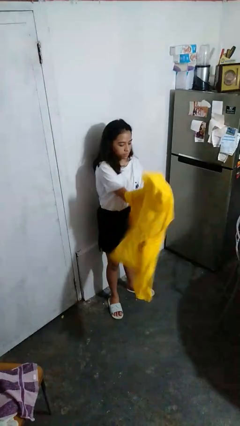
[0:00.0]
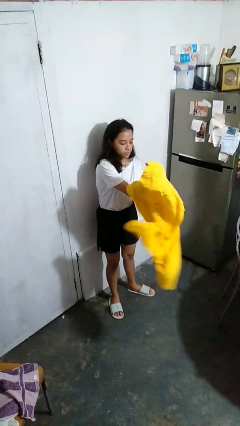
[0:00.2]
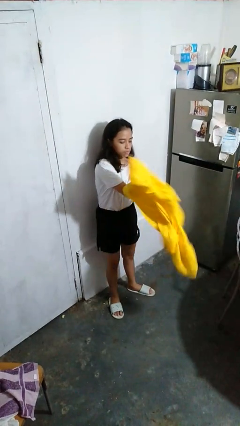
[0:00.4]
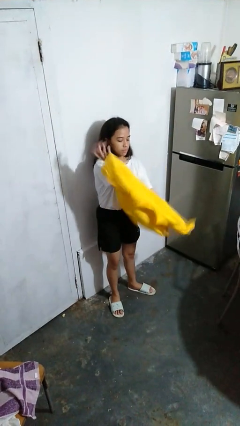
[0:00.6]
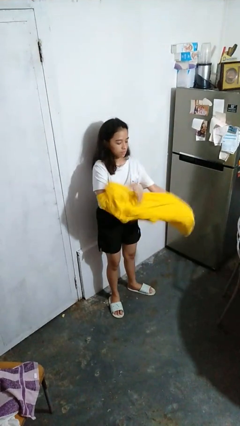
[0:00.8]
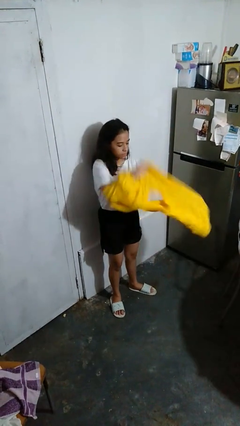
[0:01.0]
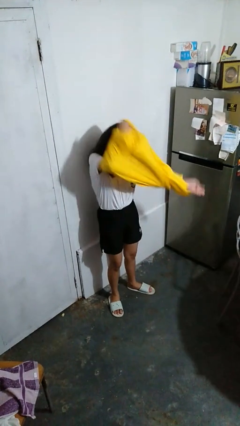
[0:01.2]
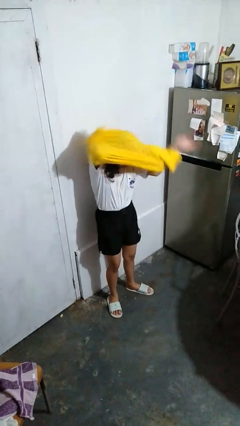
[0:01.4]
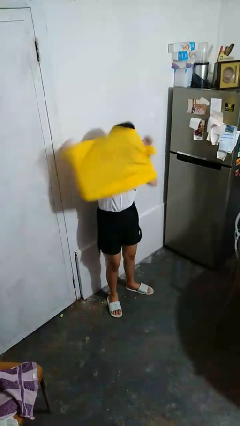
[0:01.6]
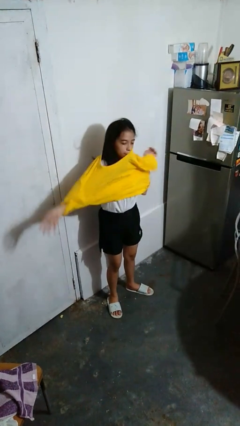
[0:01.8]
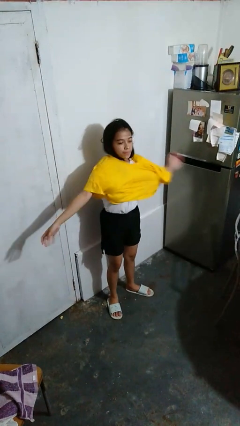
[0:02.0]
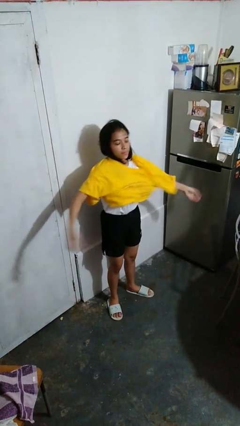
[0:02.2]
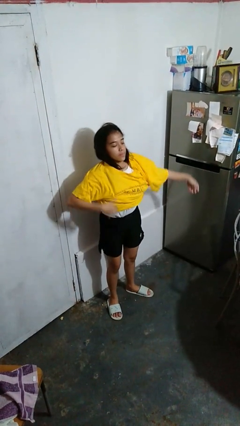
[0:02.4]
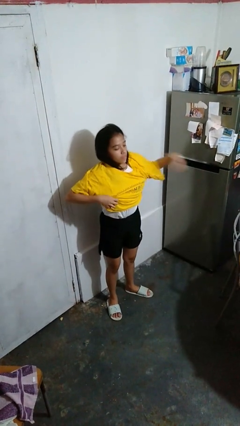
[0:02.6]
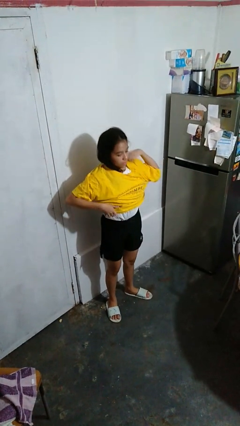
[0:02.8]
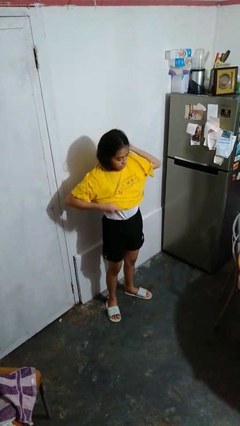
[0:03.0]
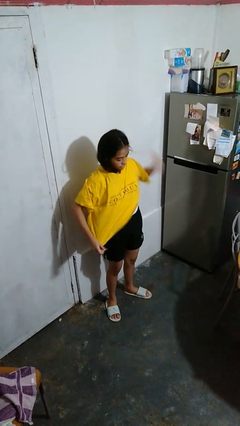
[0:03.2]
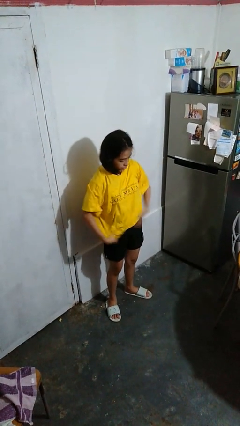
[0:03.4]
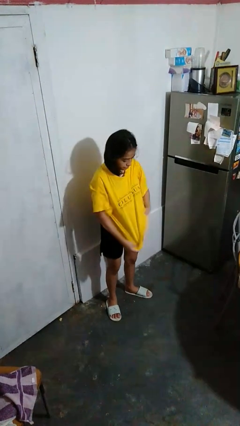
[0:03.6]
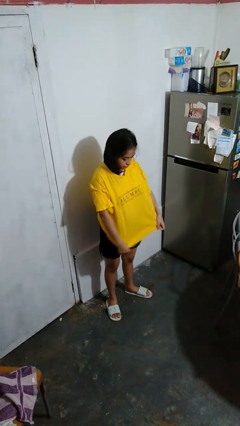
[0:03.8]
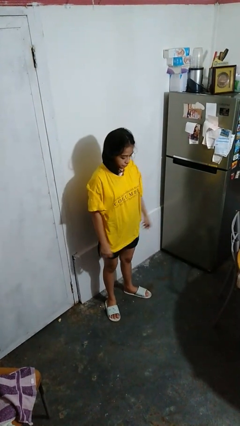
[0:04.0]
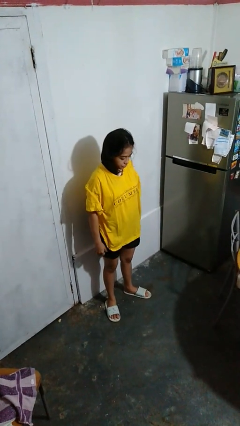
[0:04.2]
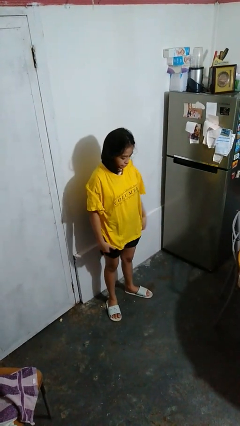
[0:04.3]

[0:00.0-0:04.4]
person puts on shirt

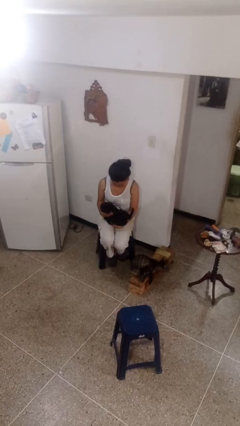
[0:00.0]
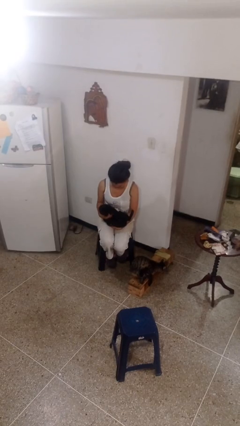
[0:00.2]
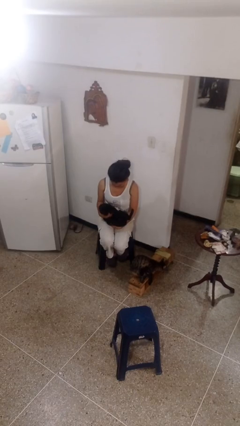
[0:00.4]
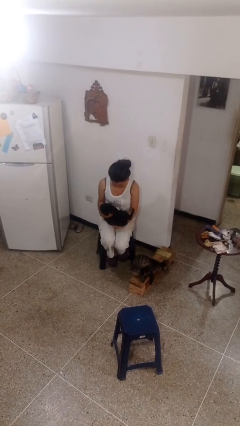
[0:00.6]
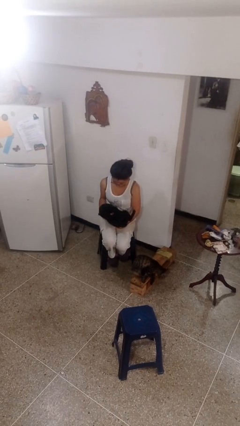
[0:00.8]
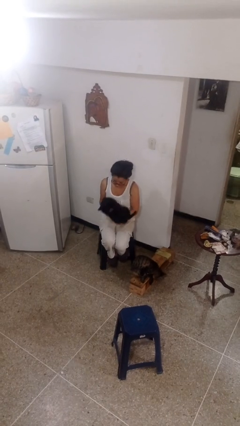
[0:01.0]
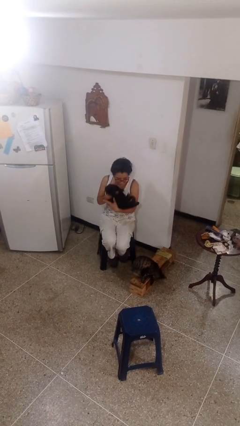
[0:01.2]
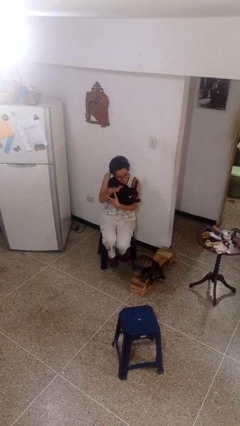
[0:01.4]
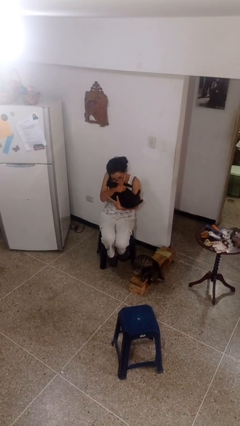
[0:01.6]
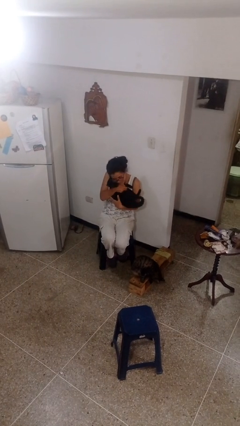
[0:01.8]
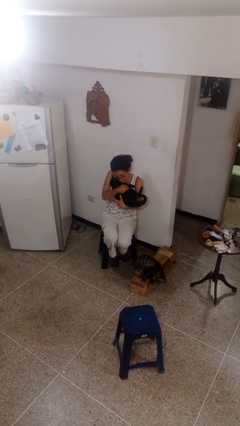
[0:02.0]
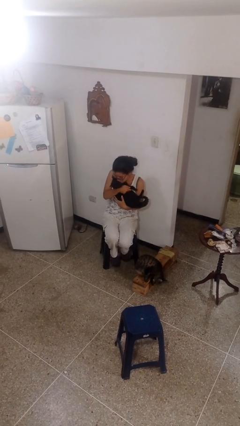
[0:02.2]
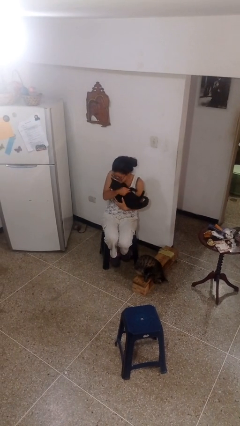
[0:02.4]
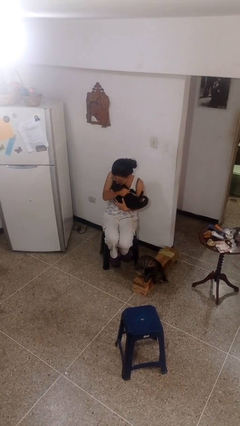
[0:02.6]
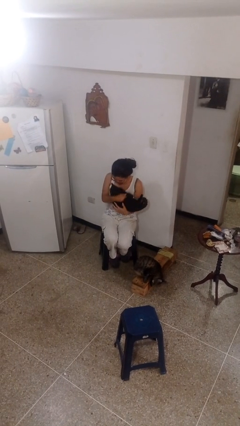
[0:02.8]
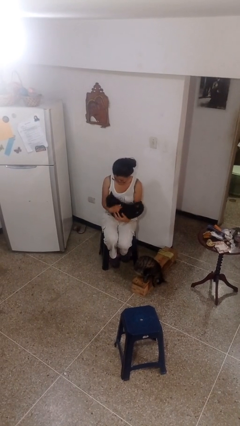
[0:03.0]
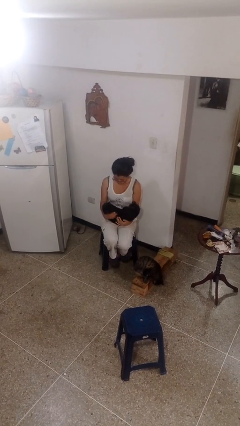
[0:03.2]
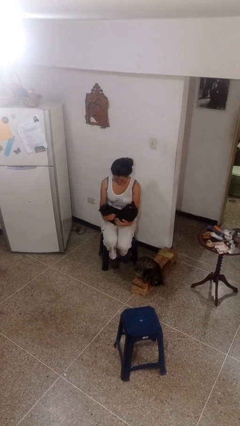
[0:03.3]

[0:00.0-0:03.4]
person hugs cat

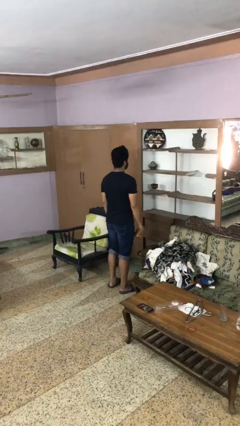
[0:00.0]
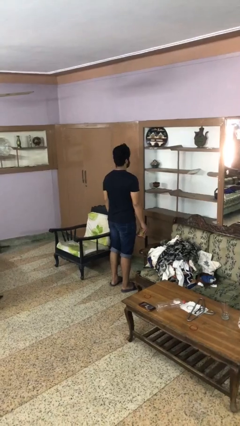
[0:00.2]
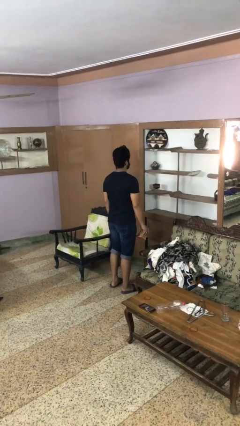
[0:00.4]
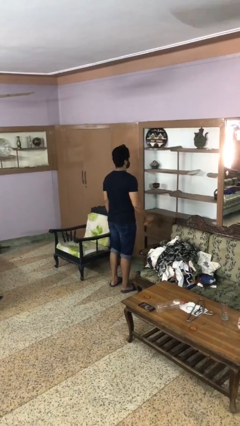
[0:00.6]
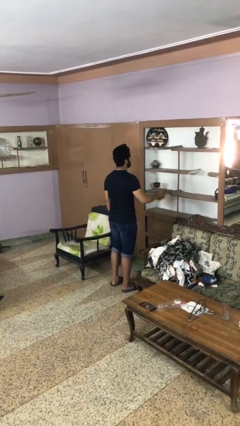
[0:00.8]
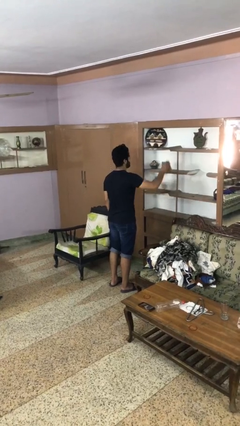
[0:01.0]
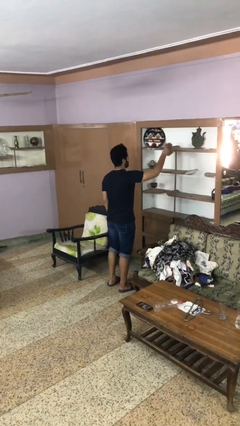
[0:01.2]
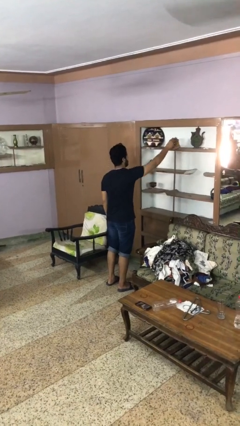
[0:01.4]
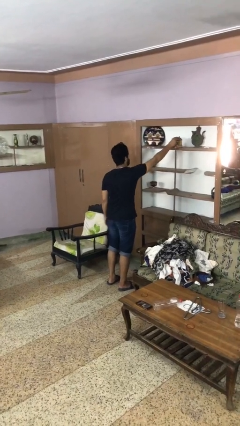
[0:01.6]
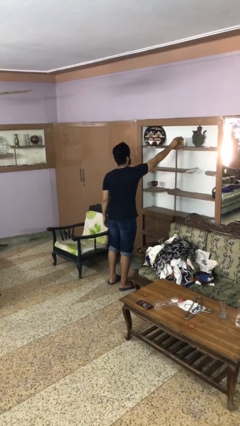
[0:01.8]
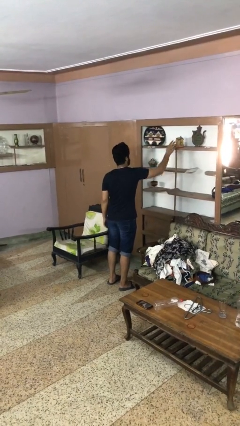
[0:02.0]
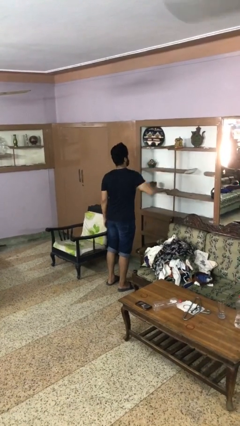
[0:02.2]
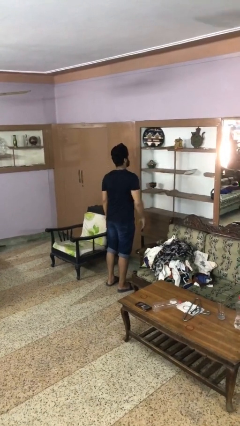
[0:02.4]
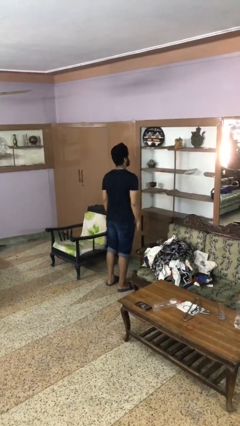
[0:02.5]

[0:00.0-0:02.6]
person puts down object on shelf

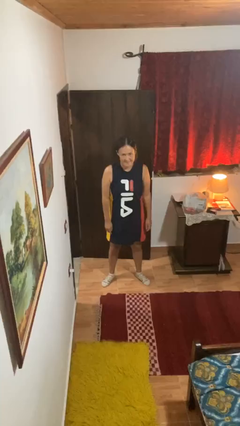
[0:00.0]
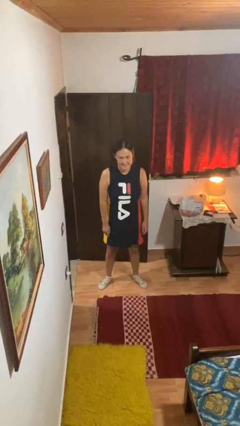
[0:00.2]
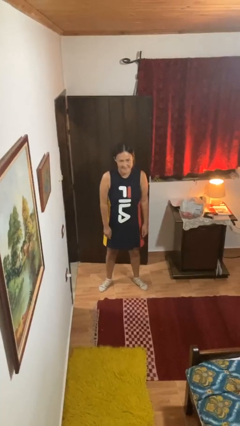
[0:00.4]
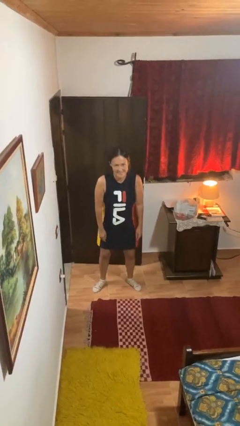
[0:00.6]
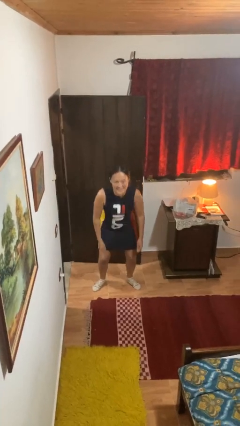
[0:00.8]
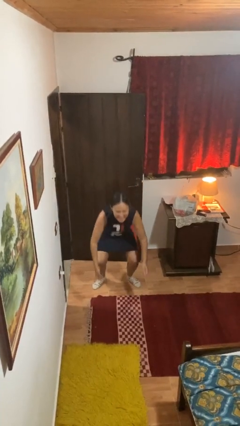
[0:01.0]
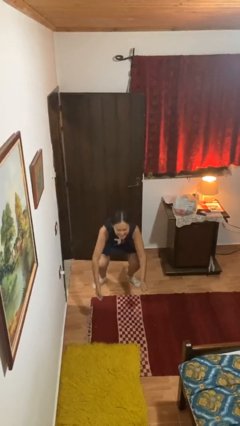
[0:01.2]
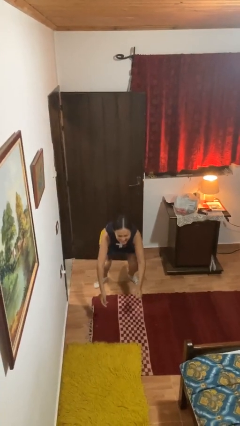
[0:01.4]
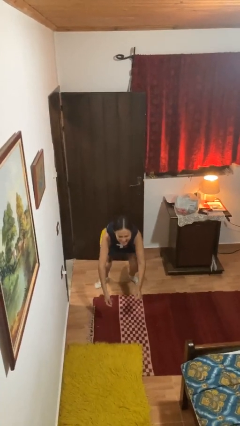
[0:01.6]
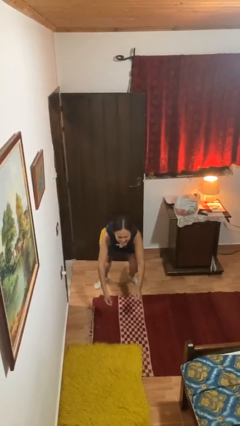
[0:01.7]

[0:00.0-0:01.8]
person squats

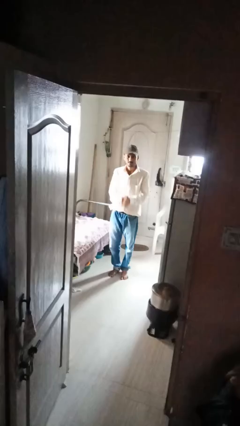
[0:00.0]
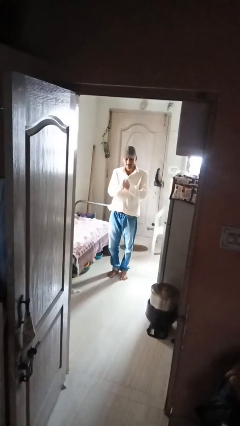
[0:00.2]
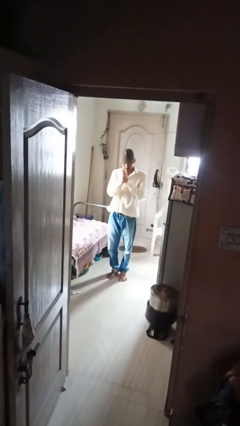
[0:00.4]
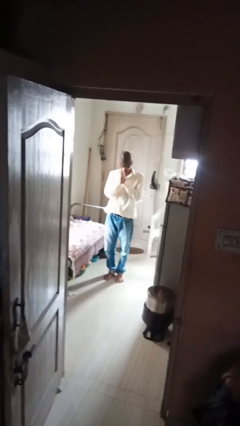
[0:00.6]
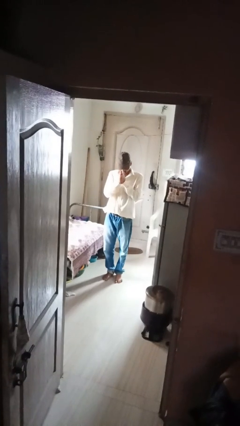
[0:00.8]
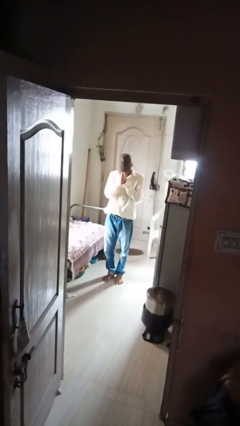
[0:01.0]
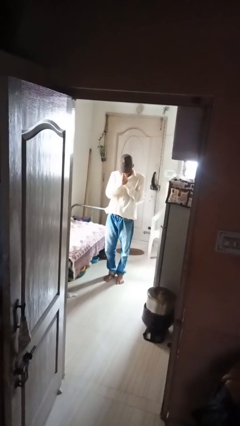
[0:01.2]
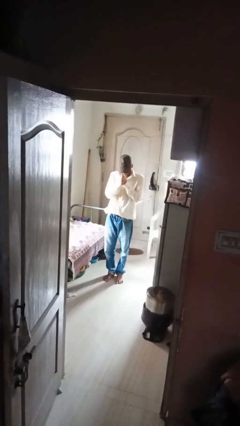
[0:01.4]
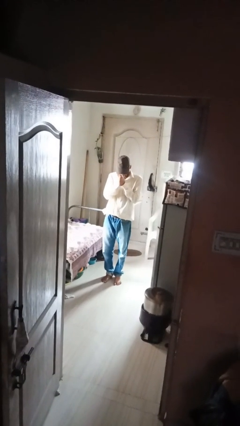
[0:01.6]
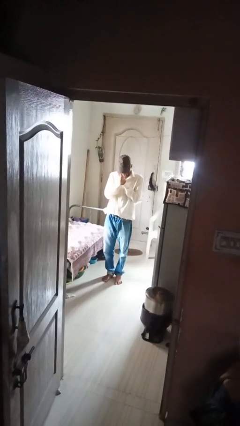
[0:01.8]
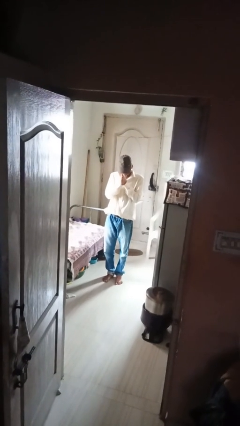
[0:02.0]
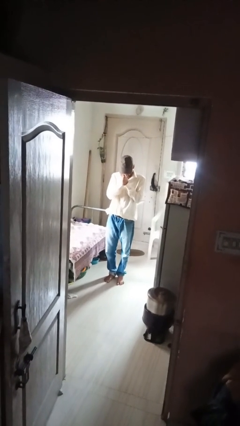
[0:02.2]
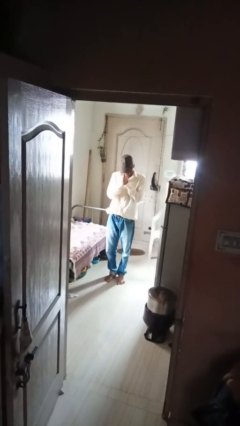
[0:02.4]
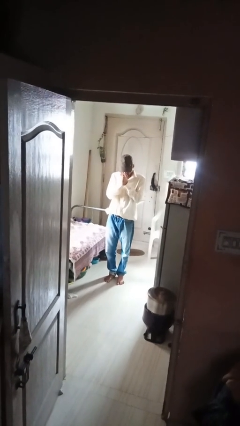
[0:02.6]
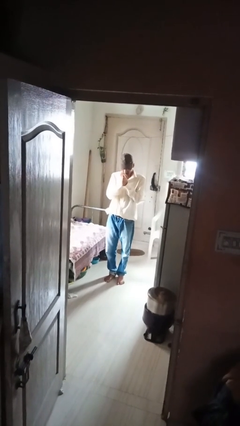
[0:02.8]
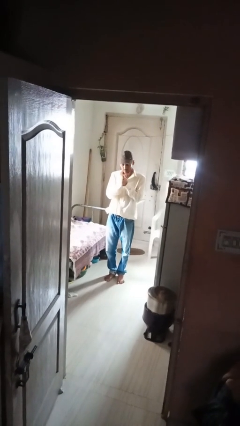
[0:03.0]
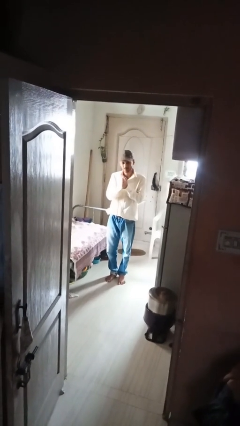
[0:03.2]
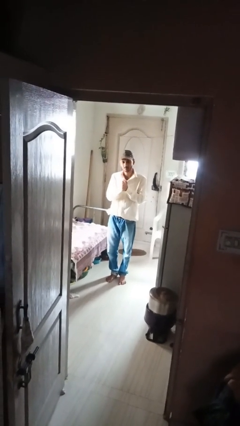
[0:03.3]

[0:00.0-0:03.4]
person prays

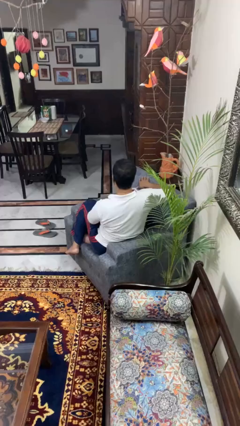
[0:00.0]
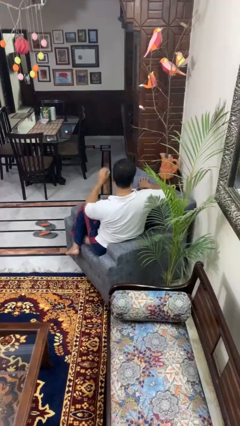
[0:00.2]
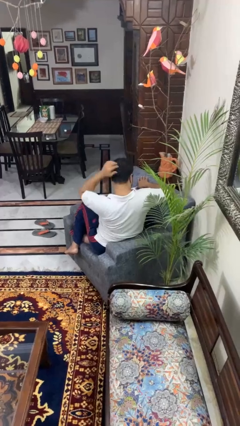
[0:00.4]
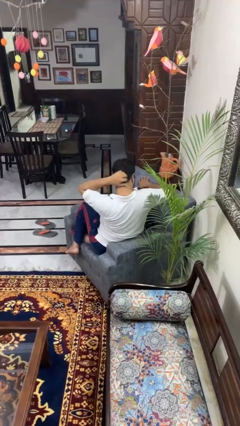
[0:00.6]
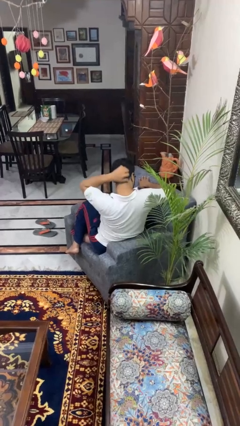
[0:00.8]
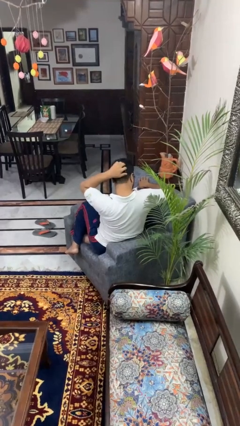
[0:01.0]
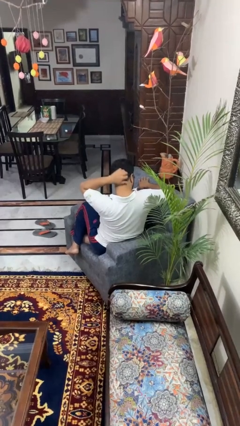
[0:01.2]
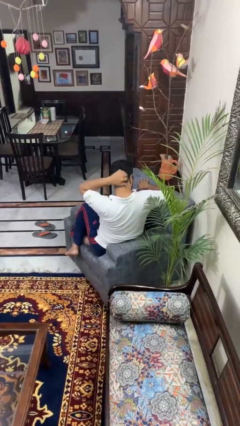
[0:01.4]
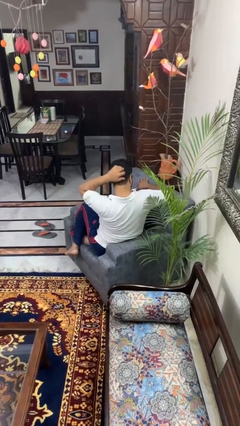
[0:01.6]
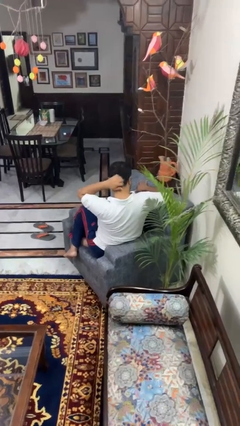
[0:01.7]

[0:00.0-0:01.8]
person scratches face

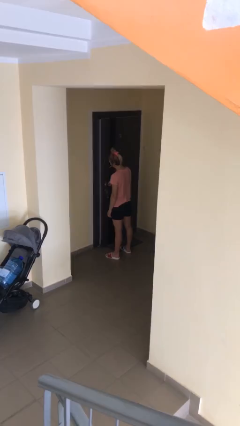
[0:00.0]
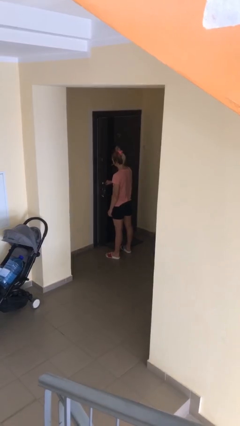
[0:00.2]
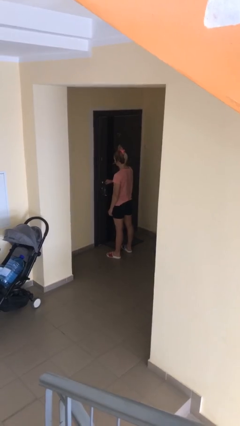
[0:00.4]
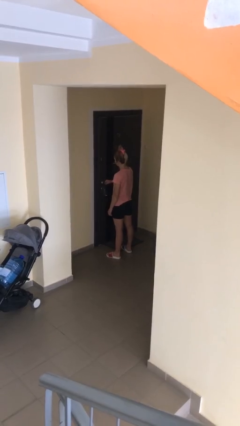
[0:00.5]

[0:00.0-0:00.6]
person closes facility door
